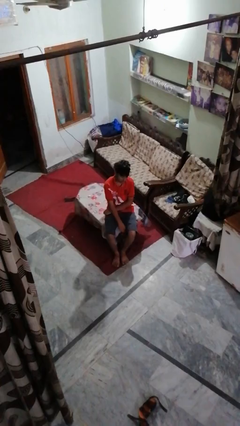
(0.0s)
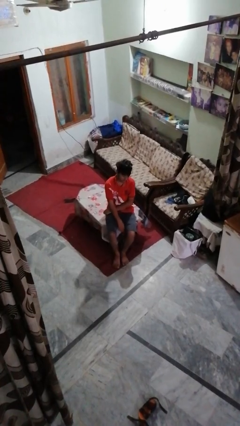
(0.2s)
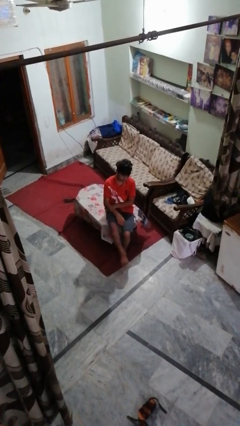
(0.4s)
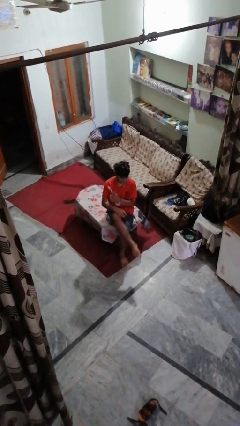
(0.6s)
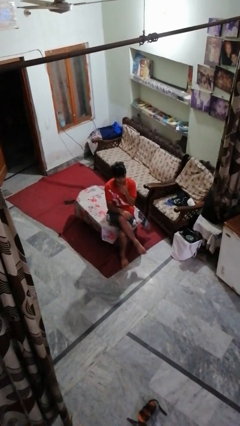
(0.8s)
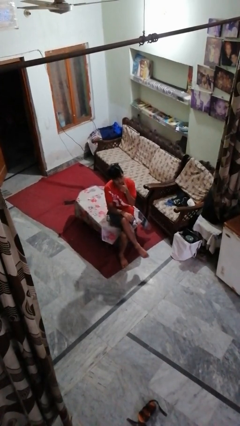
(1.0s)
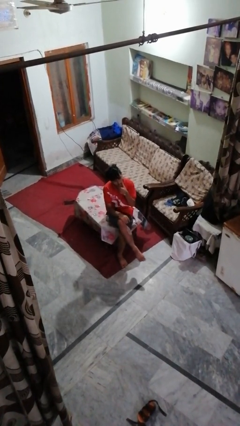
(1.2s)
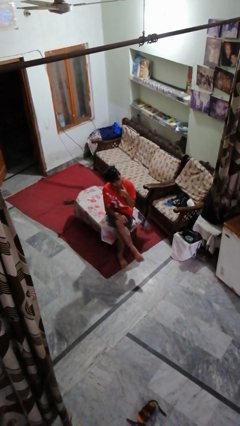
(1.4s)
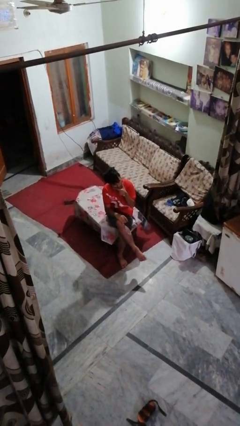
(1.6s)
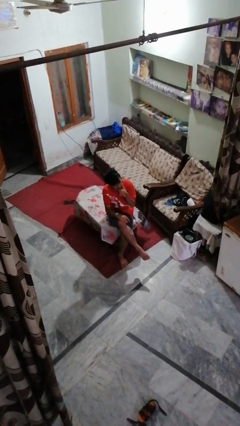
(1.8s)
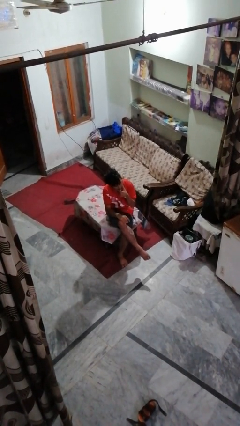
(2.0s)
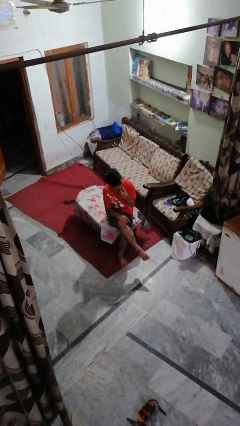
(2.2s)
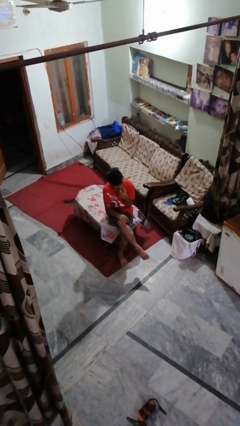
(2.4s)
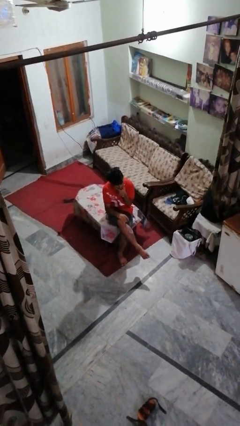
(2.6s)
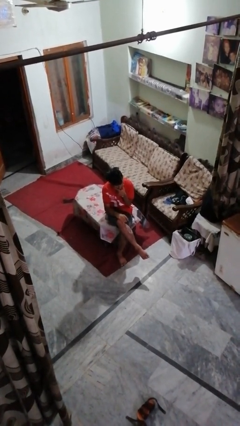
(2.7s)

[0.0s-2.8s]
person strokes chin

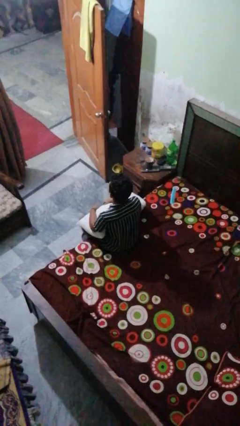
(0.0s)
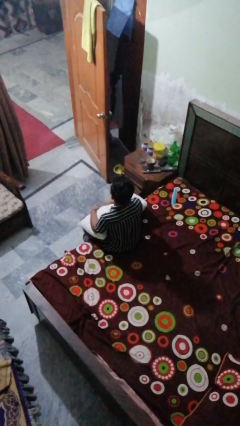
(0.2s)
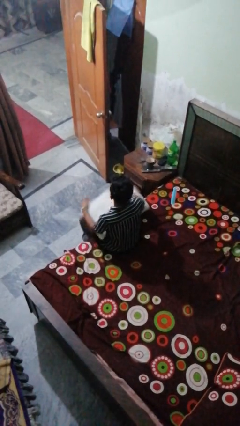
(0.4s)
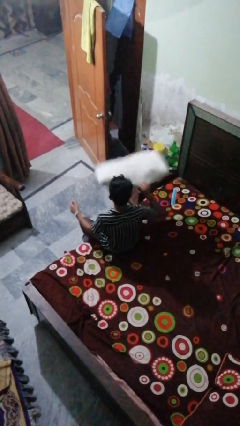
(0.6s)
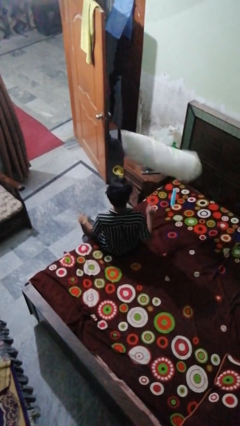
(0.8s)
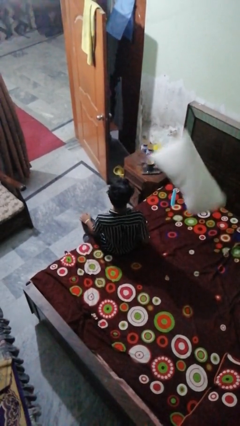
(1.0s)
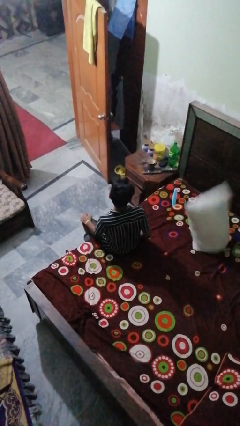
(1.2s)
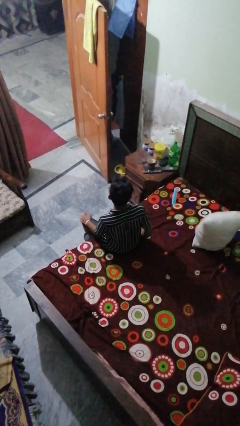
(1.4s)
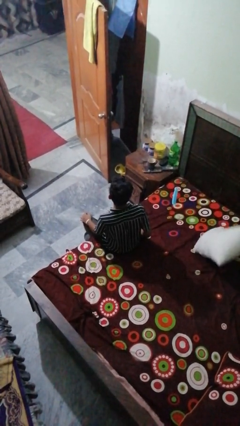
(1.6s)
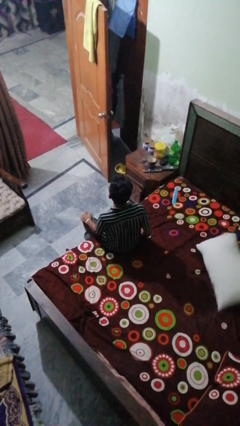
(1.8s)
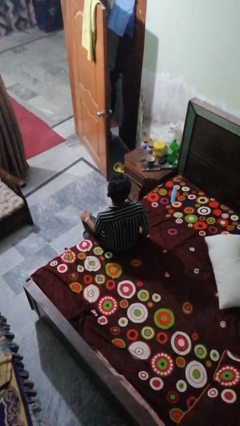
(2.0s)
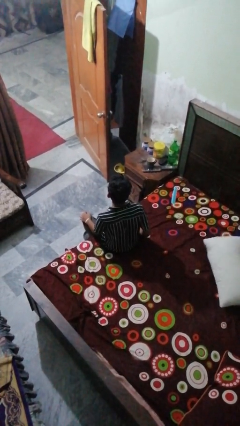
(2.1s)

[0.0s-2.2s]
person throws object on bed

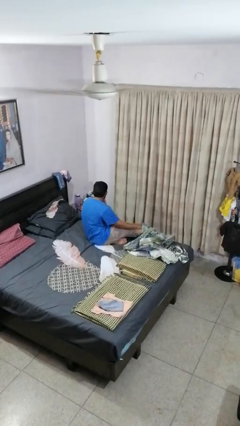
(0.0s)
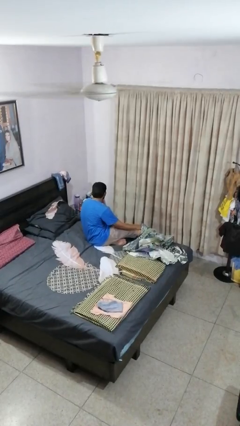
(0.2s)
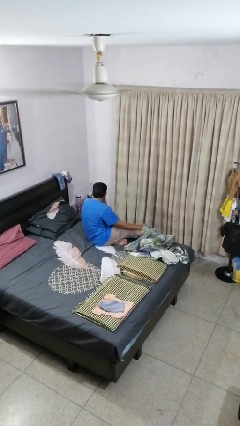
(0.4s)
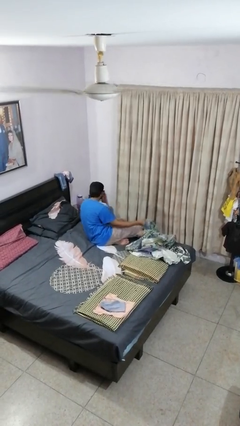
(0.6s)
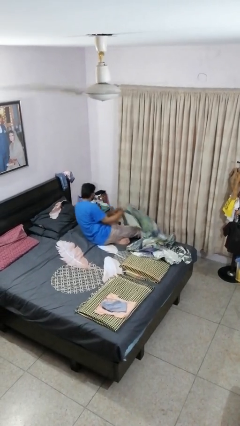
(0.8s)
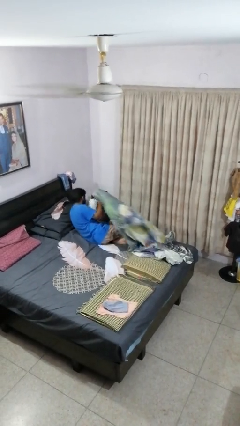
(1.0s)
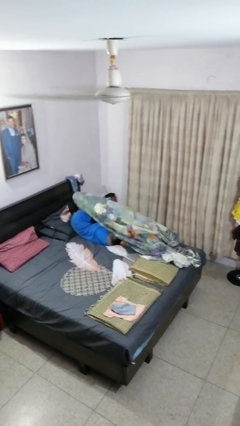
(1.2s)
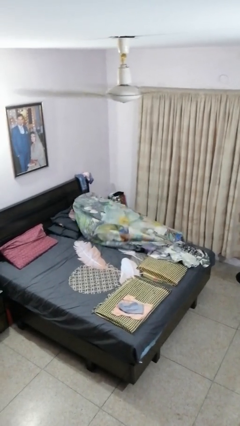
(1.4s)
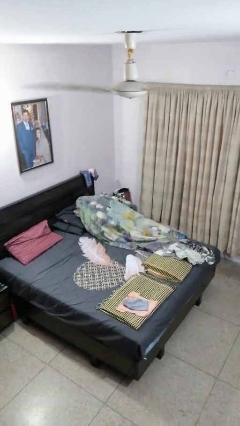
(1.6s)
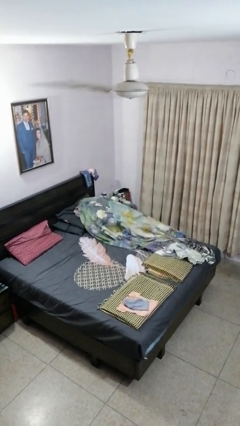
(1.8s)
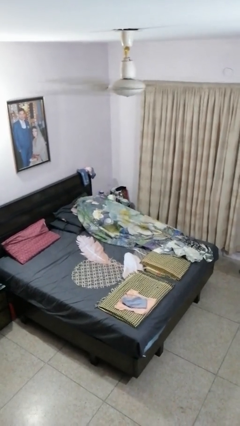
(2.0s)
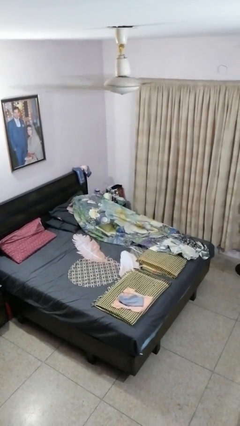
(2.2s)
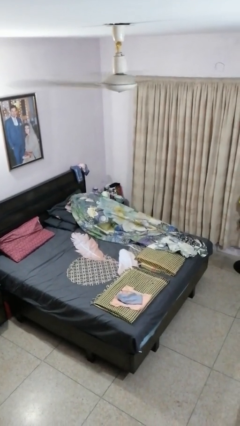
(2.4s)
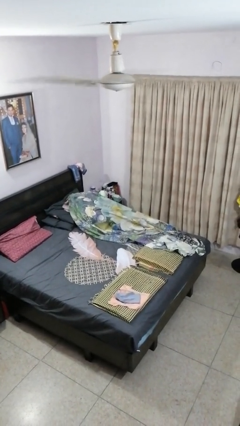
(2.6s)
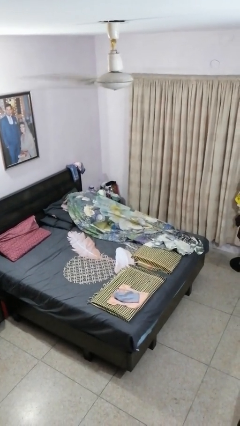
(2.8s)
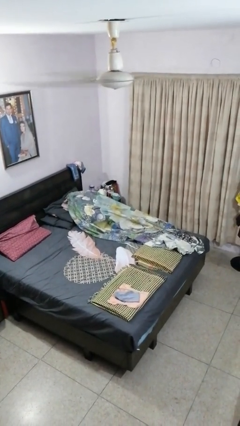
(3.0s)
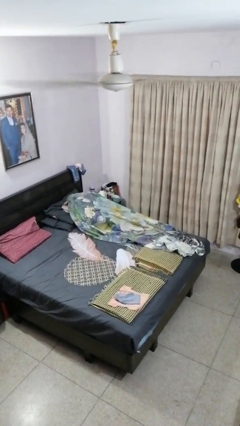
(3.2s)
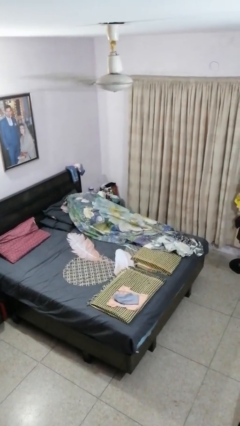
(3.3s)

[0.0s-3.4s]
person covers with bedsheets

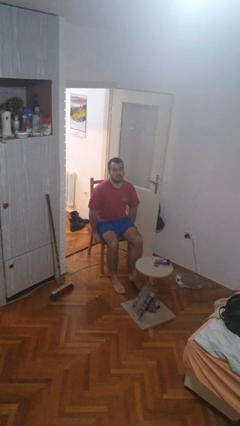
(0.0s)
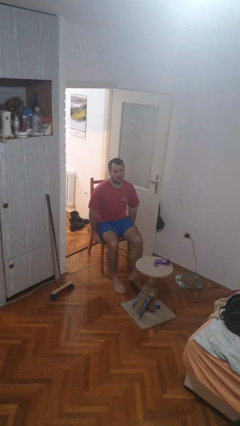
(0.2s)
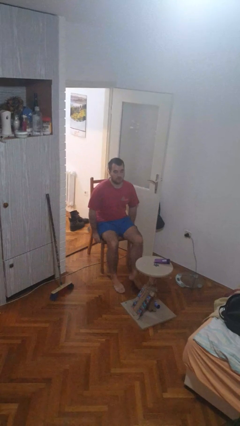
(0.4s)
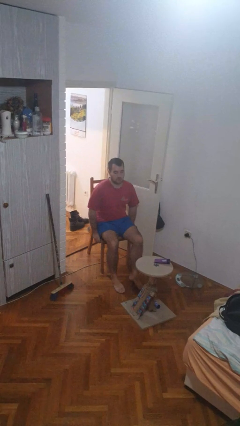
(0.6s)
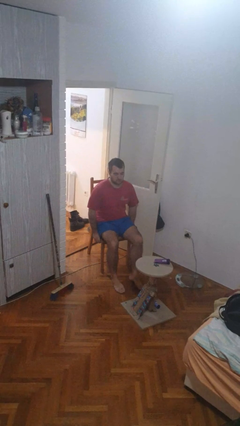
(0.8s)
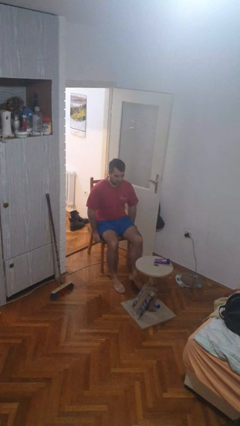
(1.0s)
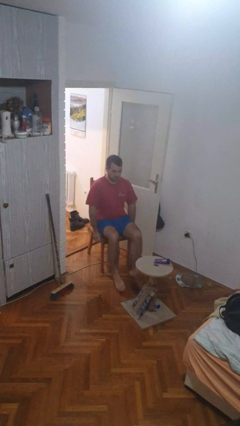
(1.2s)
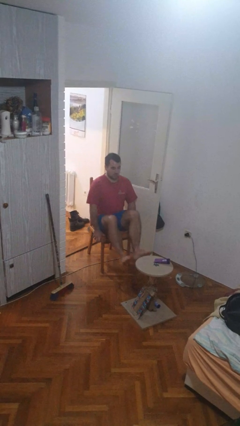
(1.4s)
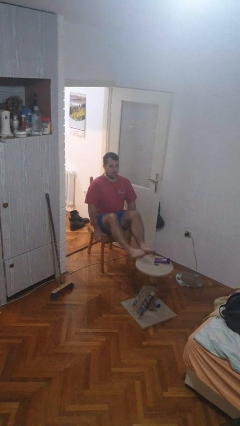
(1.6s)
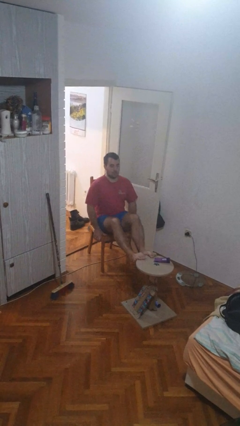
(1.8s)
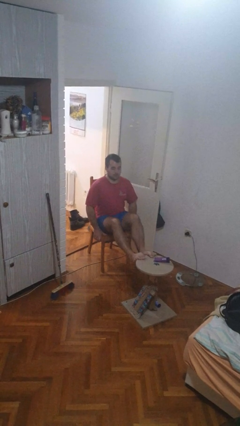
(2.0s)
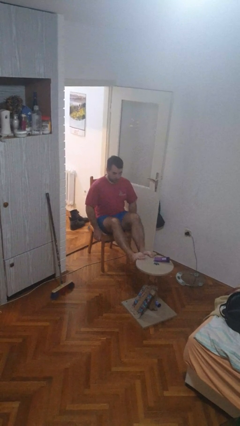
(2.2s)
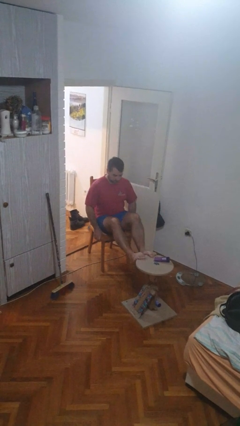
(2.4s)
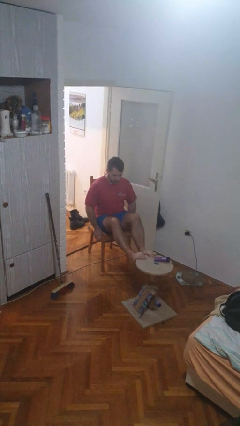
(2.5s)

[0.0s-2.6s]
person puts feet up

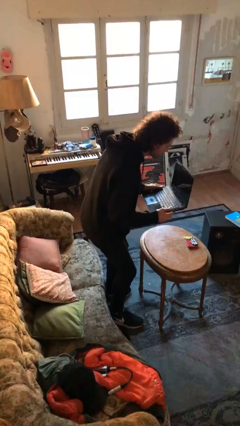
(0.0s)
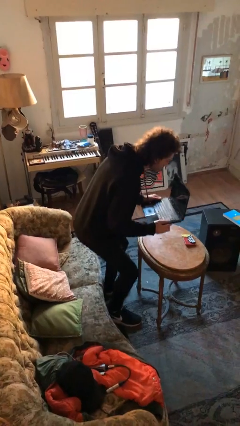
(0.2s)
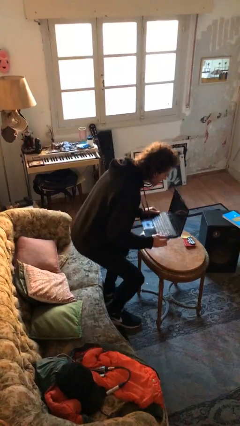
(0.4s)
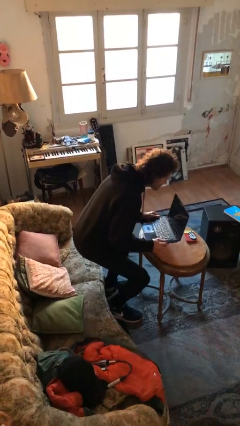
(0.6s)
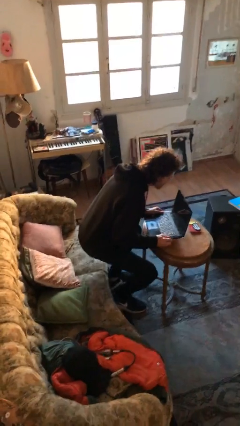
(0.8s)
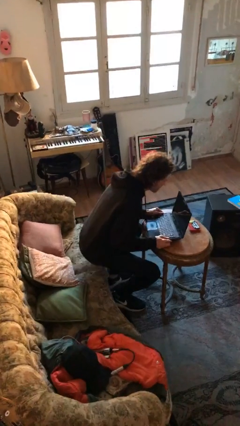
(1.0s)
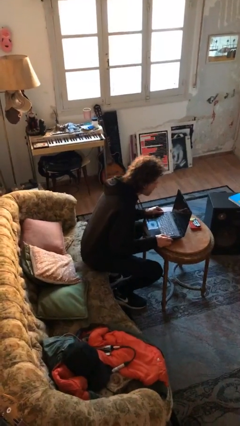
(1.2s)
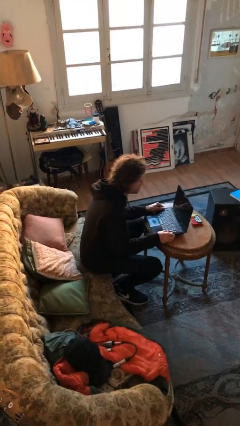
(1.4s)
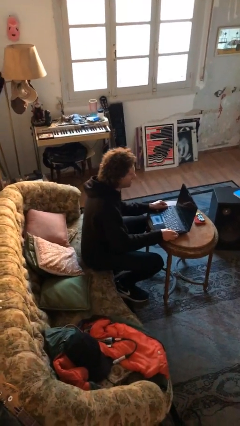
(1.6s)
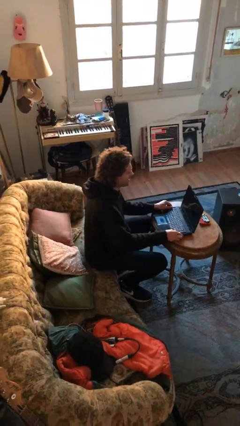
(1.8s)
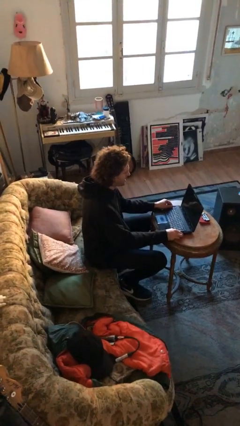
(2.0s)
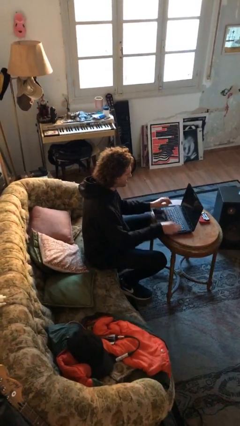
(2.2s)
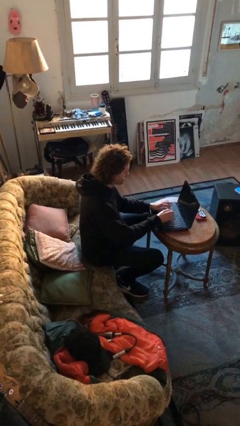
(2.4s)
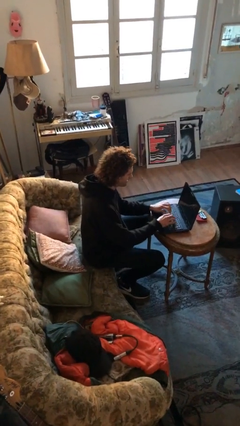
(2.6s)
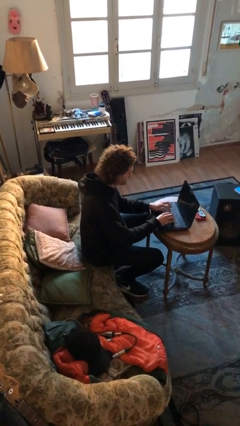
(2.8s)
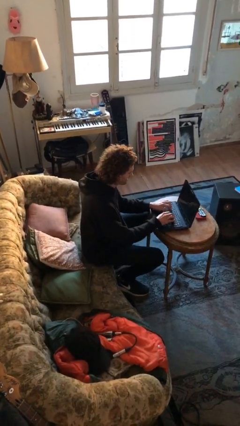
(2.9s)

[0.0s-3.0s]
person sits down

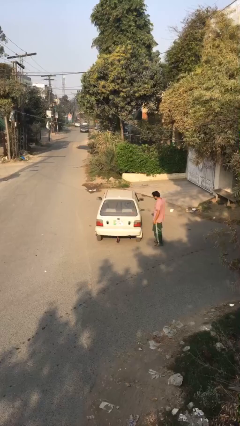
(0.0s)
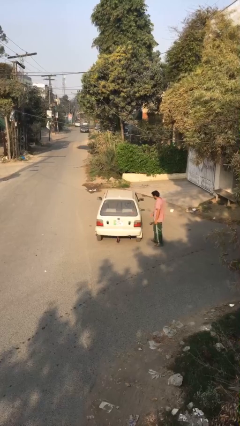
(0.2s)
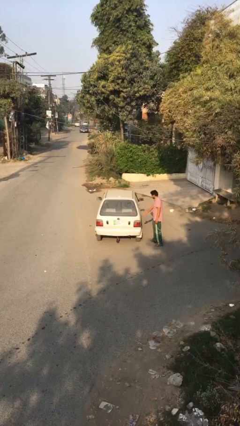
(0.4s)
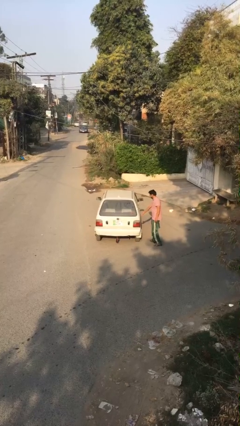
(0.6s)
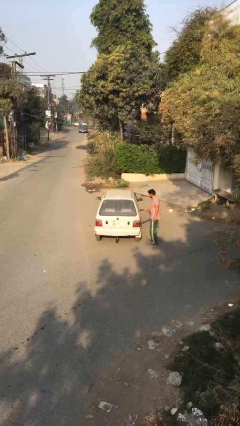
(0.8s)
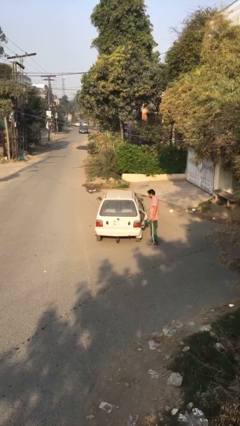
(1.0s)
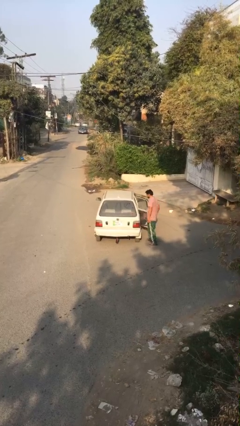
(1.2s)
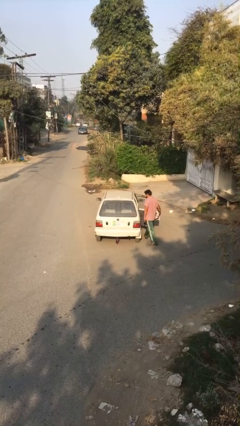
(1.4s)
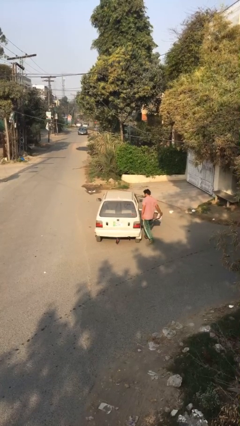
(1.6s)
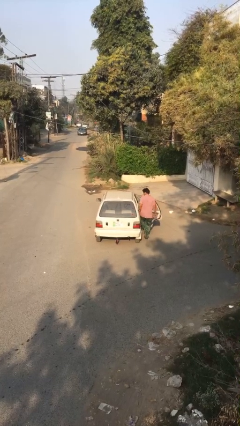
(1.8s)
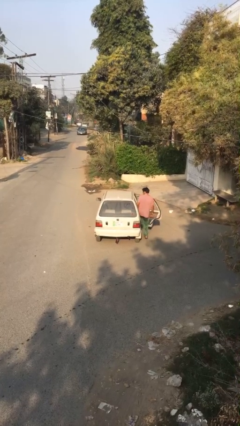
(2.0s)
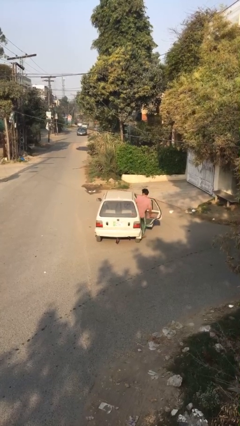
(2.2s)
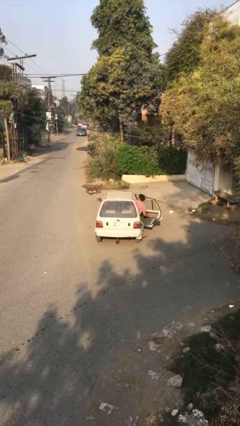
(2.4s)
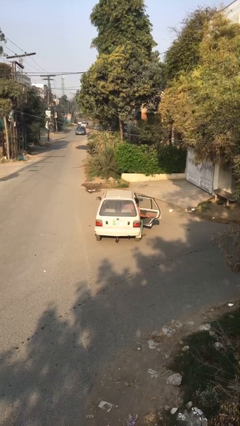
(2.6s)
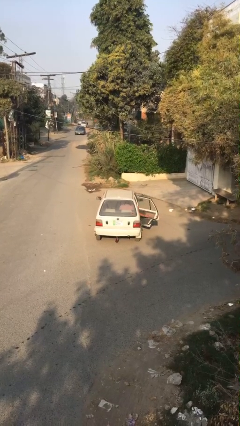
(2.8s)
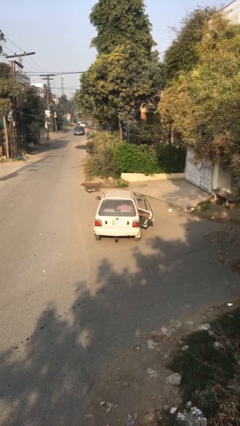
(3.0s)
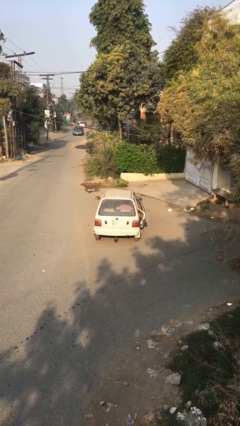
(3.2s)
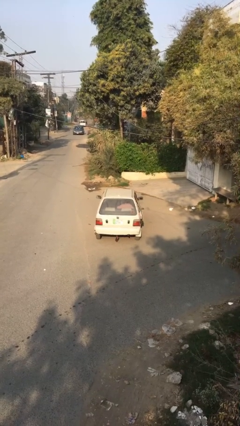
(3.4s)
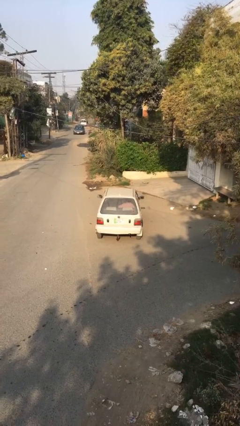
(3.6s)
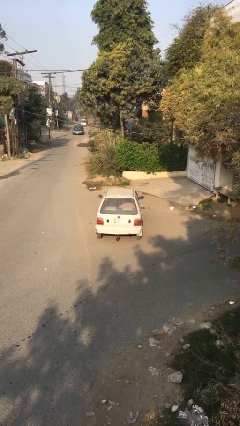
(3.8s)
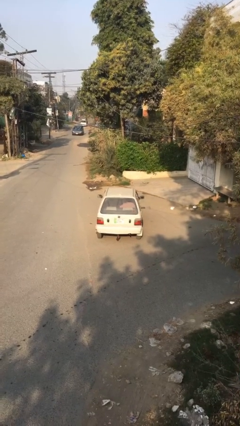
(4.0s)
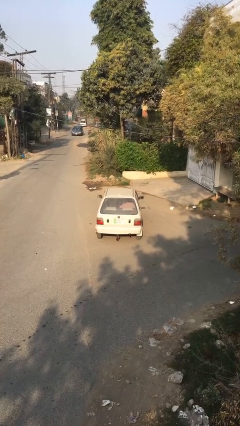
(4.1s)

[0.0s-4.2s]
car picks up person
